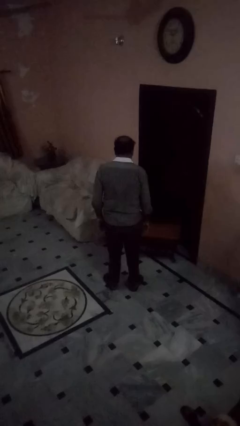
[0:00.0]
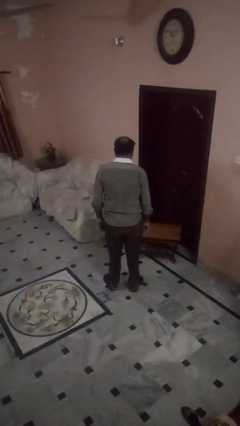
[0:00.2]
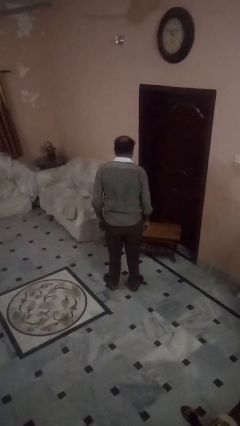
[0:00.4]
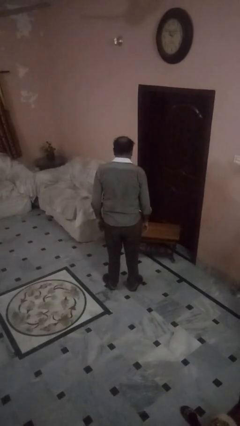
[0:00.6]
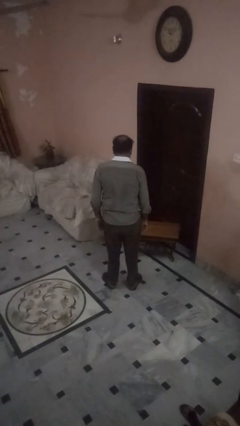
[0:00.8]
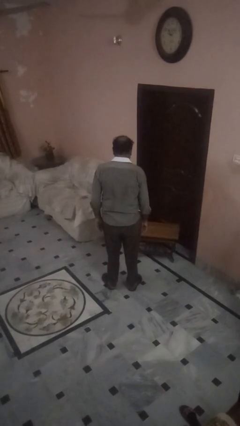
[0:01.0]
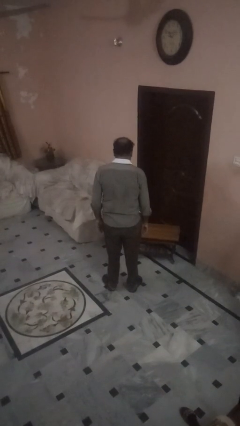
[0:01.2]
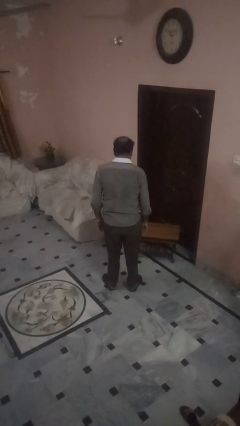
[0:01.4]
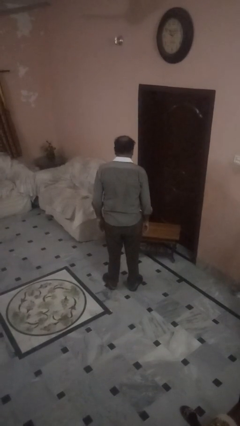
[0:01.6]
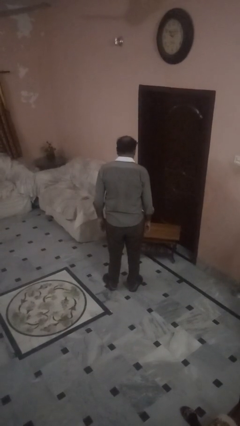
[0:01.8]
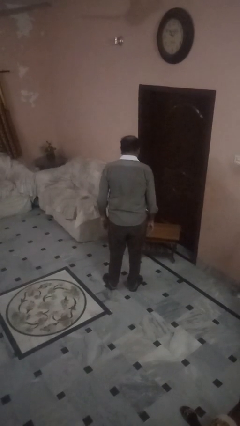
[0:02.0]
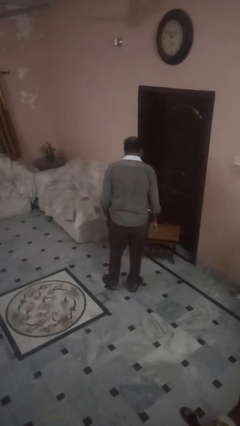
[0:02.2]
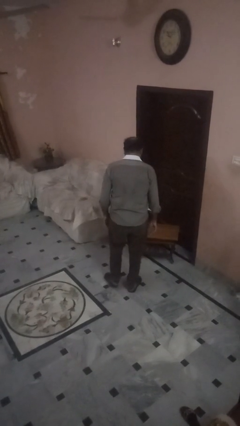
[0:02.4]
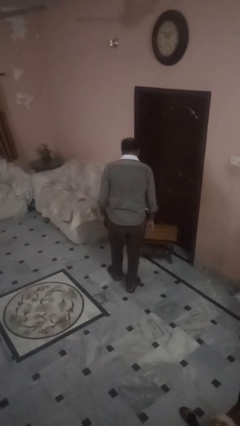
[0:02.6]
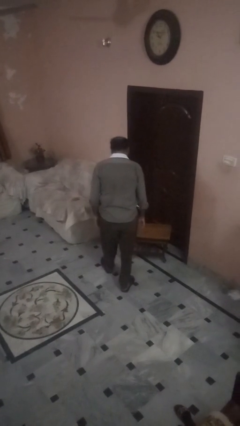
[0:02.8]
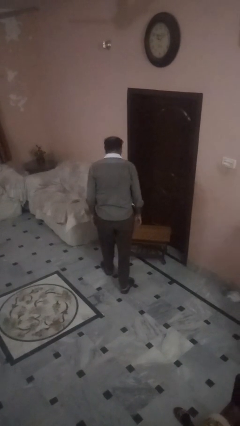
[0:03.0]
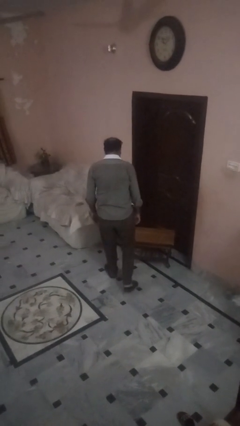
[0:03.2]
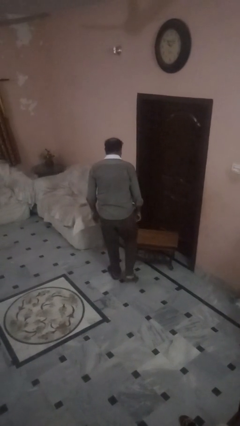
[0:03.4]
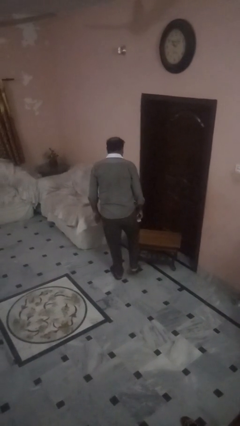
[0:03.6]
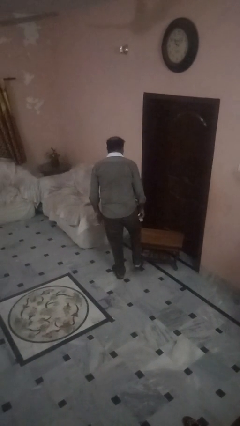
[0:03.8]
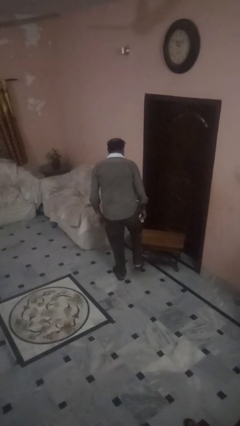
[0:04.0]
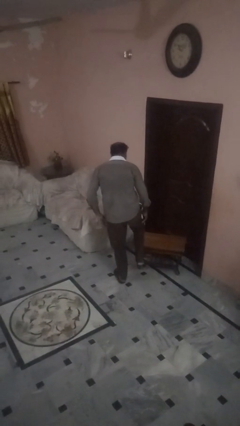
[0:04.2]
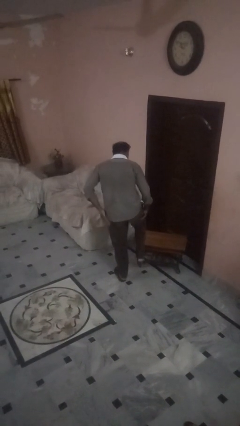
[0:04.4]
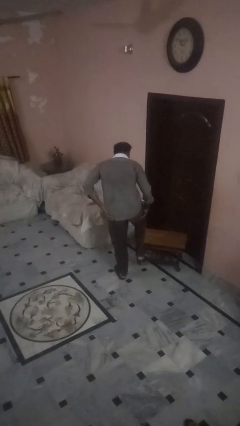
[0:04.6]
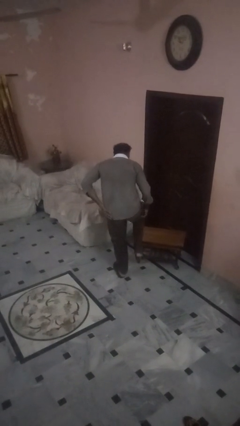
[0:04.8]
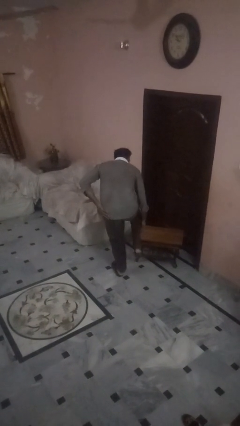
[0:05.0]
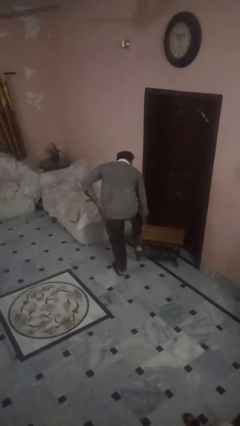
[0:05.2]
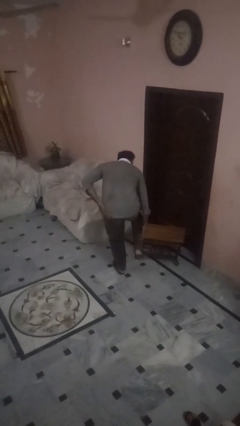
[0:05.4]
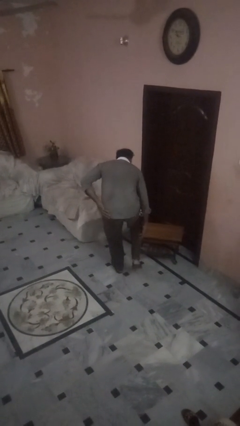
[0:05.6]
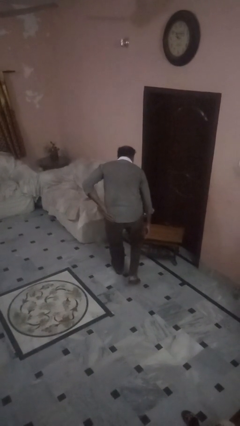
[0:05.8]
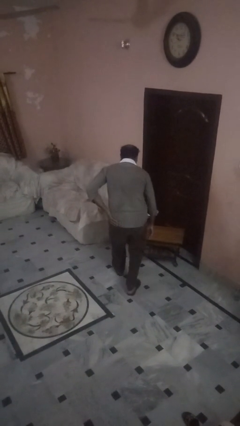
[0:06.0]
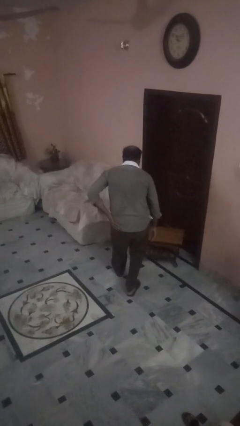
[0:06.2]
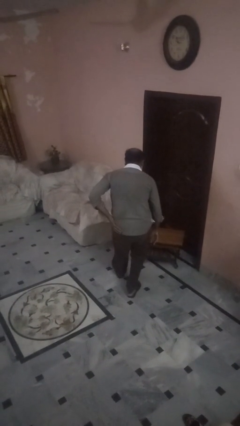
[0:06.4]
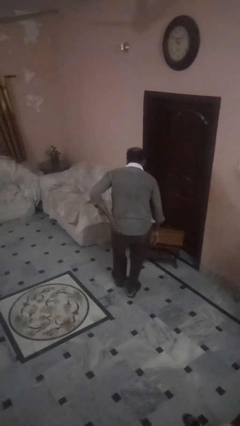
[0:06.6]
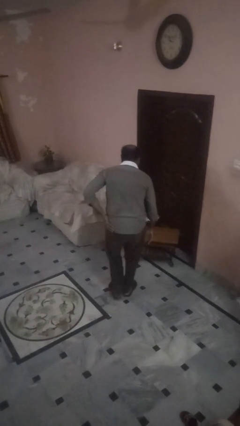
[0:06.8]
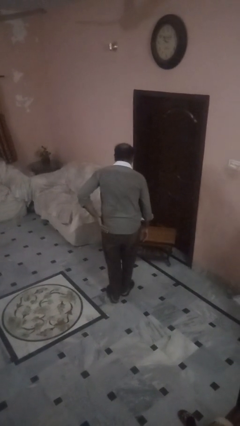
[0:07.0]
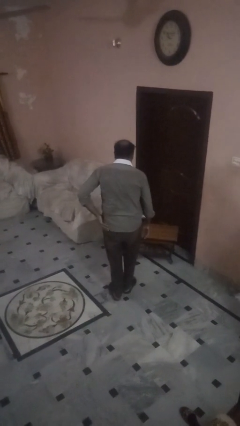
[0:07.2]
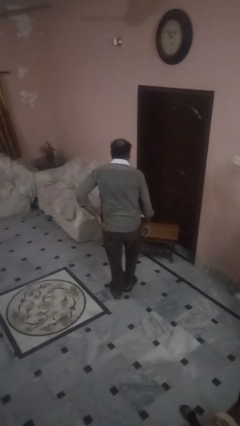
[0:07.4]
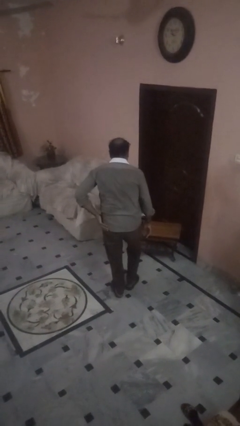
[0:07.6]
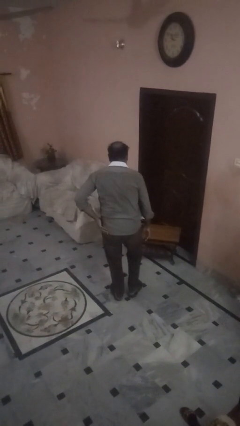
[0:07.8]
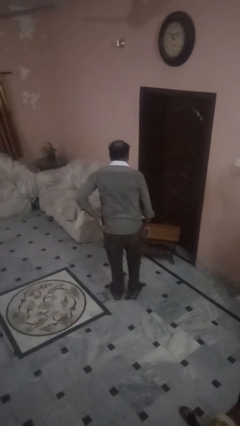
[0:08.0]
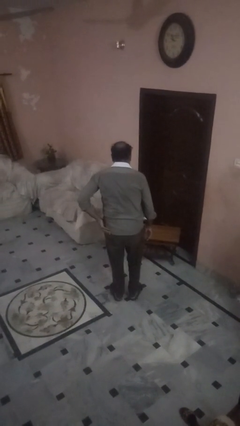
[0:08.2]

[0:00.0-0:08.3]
person bumps into table

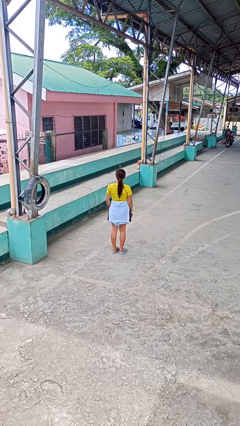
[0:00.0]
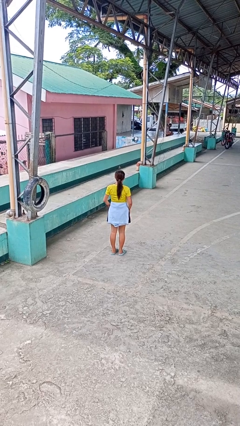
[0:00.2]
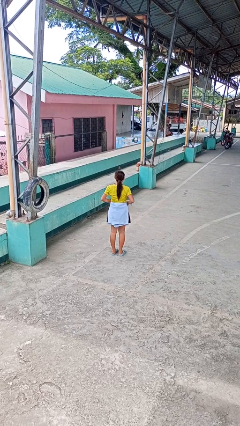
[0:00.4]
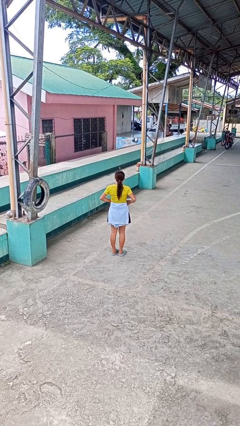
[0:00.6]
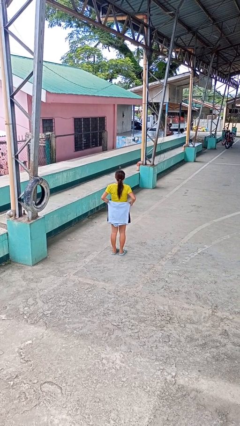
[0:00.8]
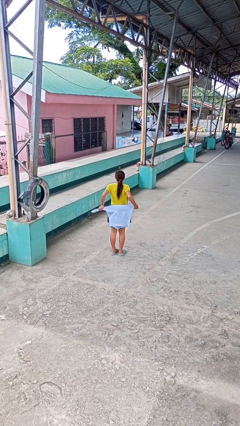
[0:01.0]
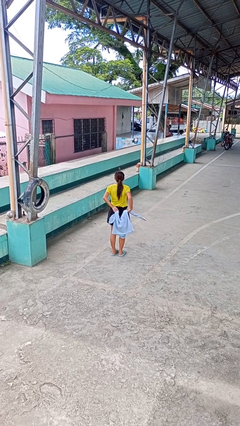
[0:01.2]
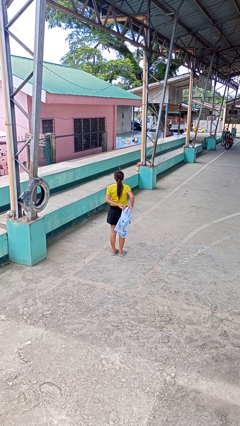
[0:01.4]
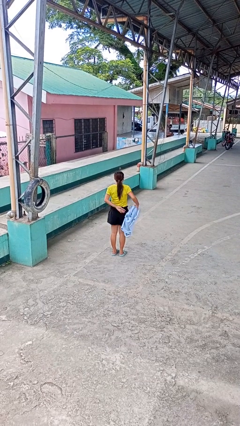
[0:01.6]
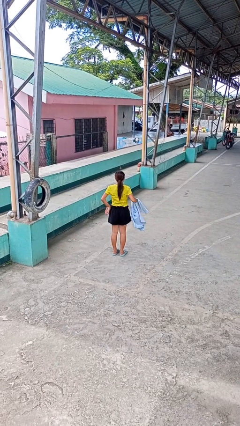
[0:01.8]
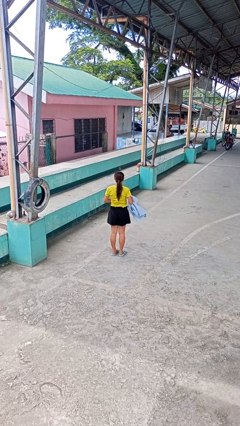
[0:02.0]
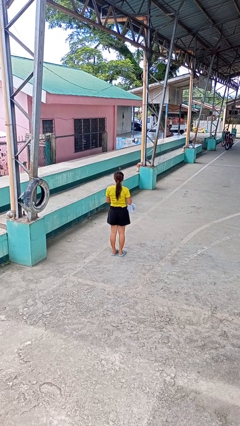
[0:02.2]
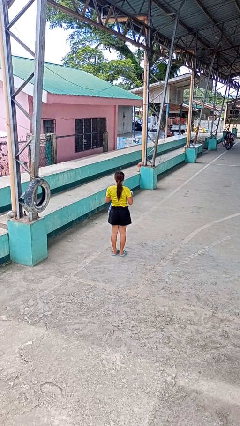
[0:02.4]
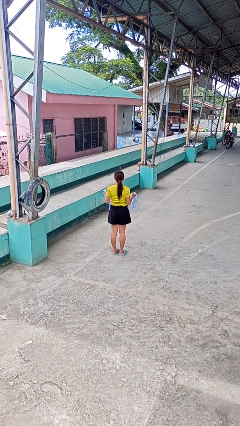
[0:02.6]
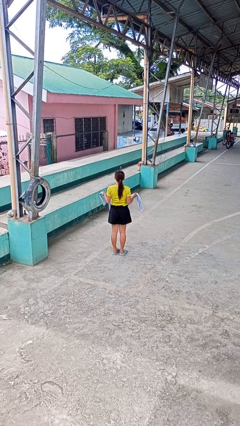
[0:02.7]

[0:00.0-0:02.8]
person unties jacket around waist

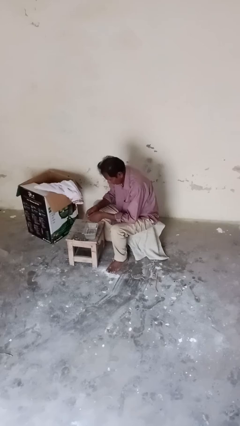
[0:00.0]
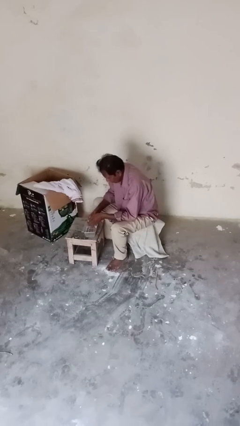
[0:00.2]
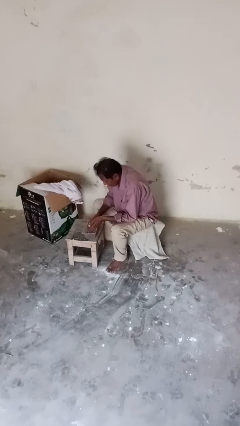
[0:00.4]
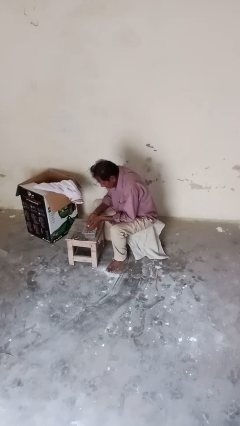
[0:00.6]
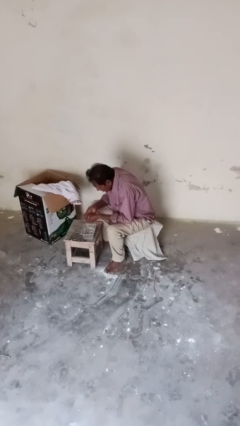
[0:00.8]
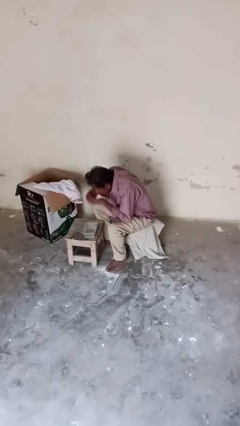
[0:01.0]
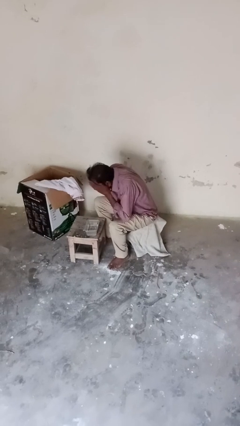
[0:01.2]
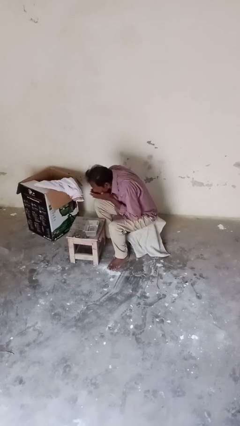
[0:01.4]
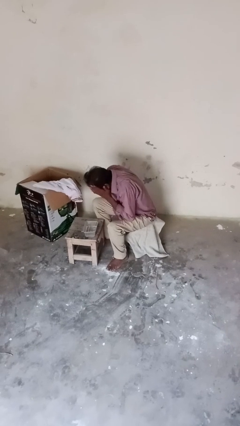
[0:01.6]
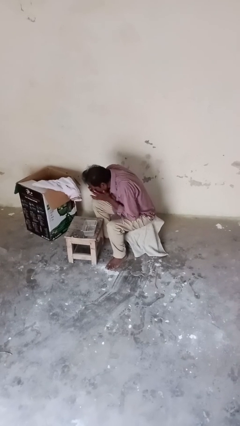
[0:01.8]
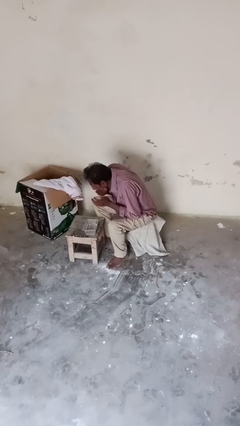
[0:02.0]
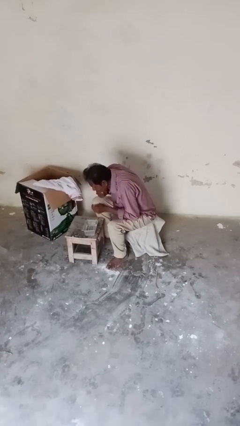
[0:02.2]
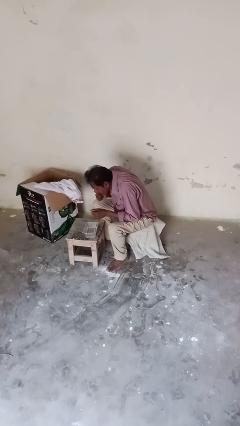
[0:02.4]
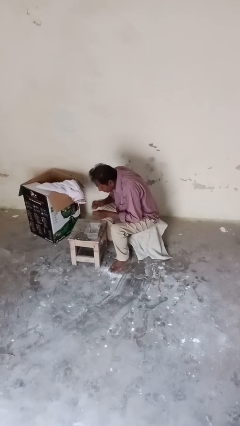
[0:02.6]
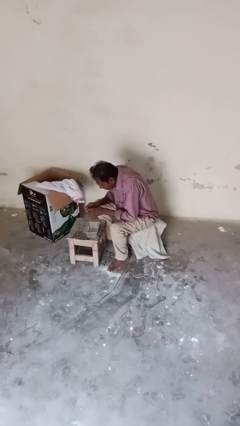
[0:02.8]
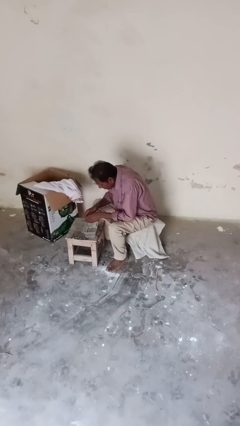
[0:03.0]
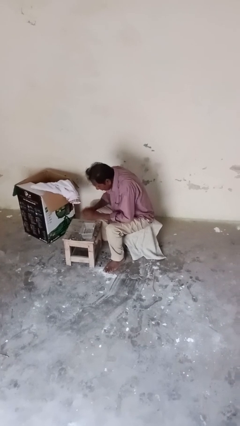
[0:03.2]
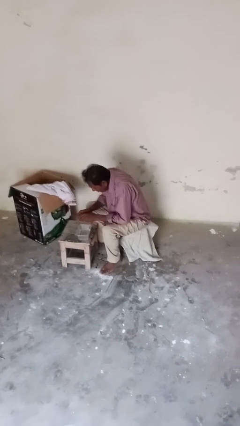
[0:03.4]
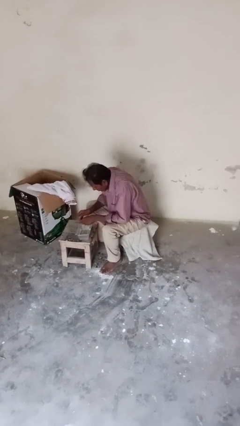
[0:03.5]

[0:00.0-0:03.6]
person washes face

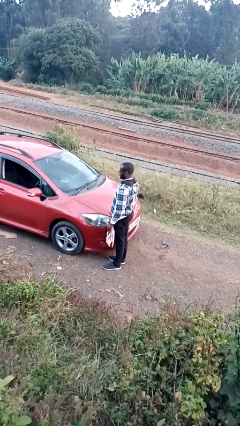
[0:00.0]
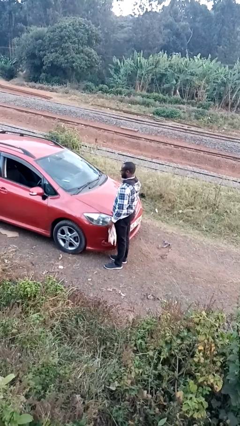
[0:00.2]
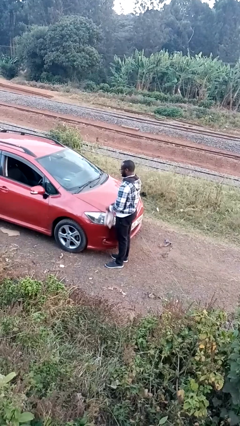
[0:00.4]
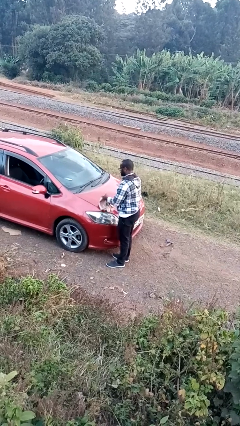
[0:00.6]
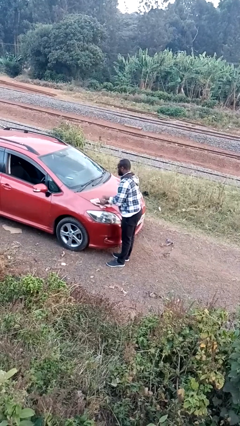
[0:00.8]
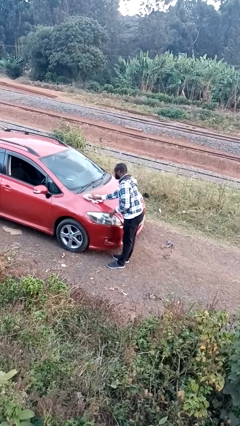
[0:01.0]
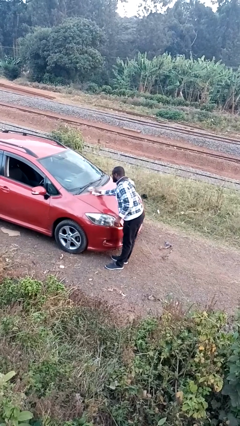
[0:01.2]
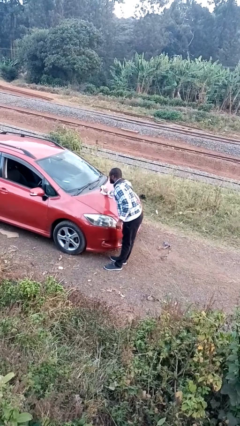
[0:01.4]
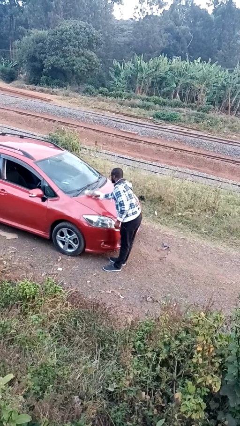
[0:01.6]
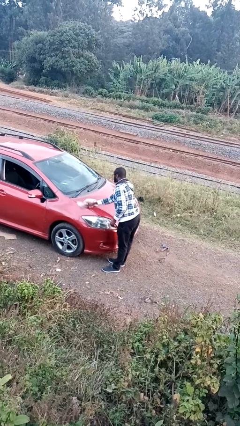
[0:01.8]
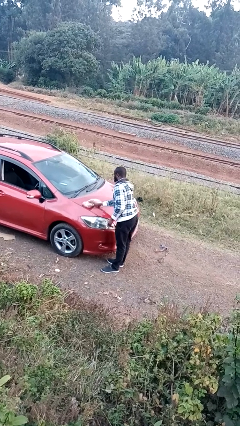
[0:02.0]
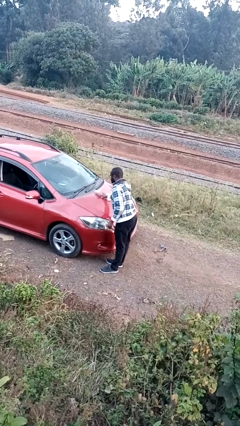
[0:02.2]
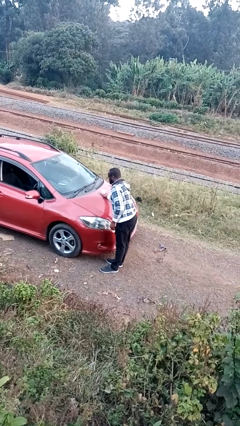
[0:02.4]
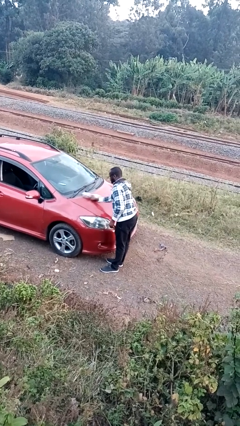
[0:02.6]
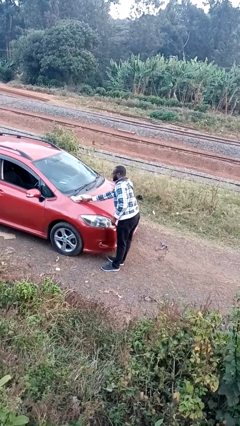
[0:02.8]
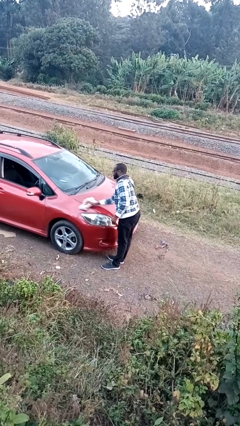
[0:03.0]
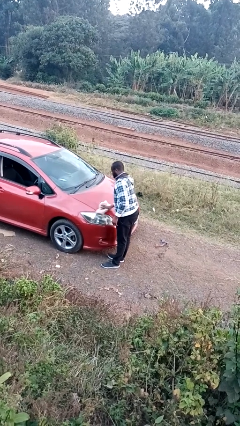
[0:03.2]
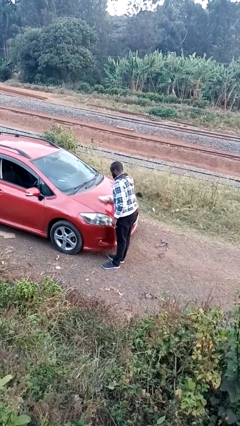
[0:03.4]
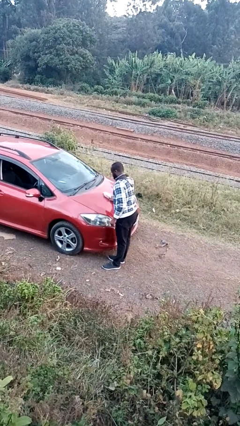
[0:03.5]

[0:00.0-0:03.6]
person polishes car with rag
